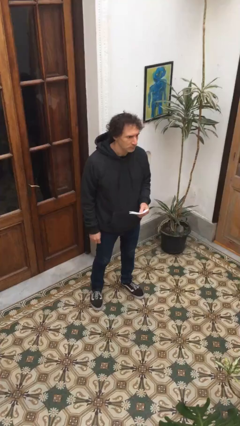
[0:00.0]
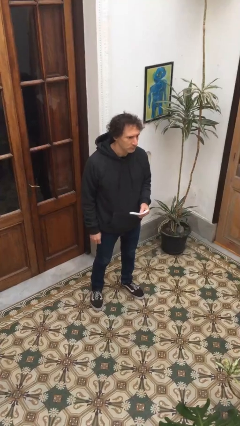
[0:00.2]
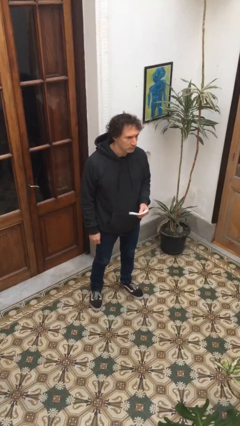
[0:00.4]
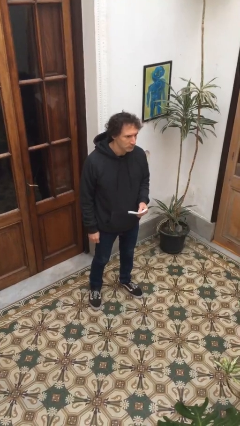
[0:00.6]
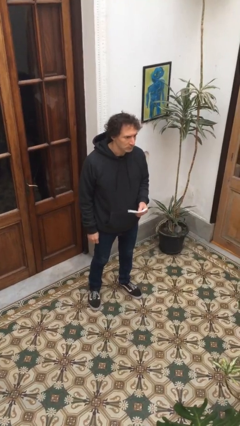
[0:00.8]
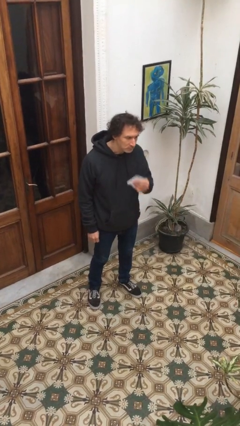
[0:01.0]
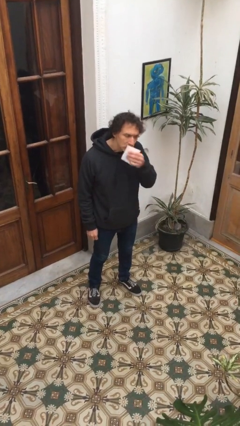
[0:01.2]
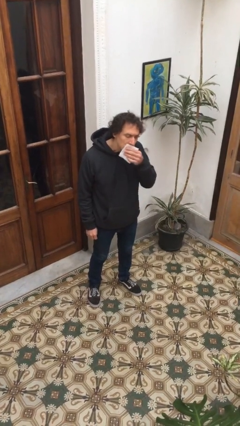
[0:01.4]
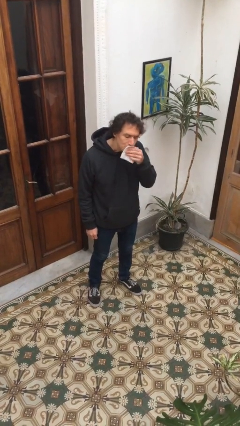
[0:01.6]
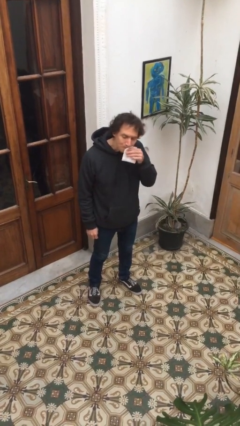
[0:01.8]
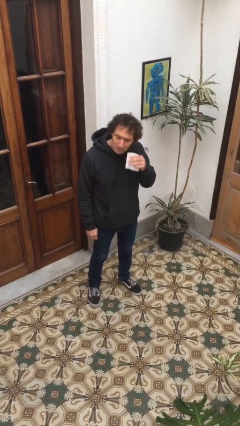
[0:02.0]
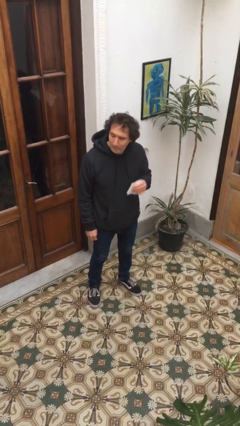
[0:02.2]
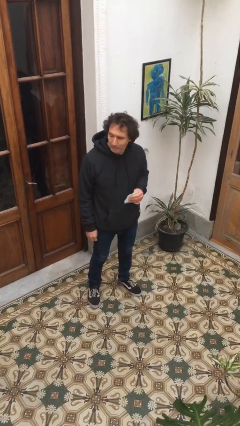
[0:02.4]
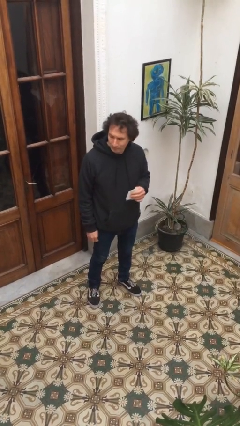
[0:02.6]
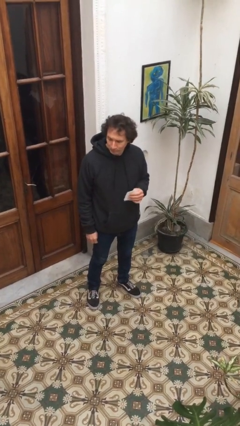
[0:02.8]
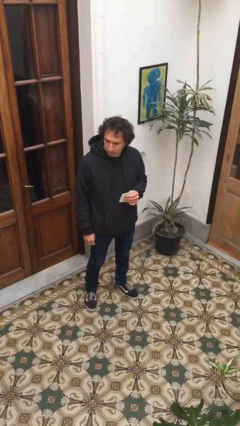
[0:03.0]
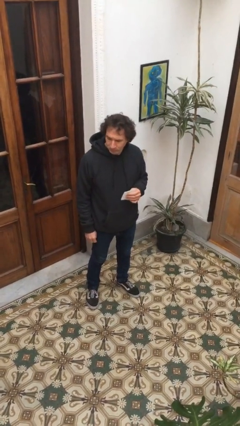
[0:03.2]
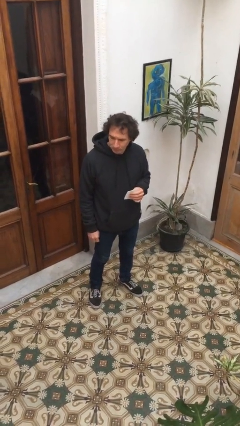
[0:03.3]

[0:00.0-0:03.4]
person wipes mouth with napkin

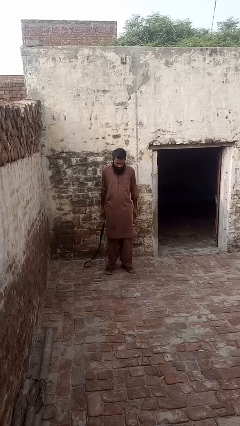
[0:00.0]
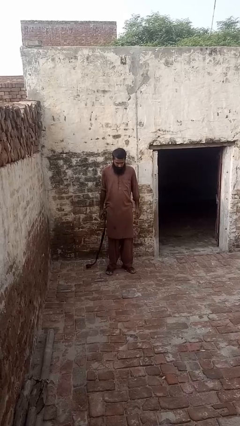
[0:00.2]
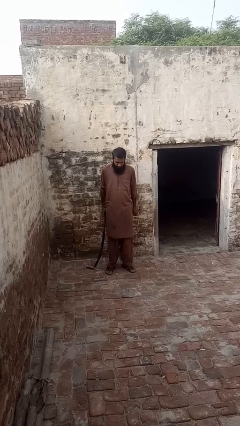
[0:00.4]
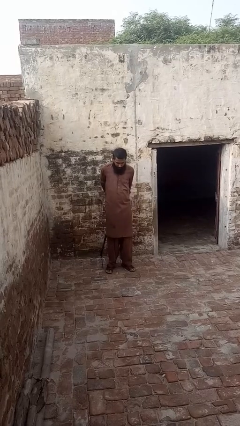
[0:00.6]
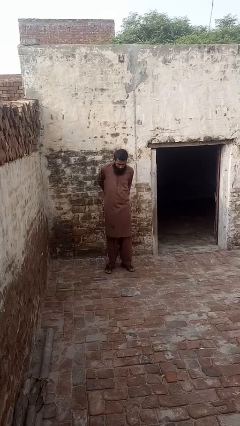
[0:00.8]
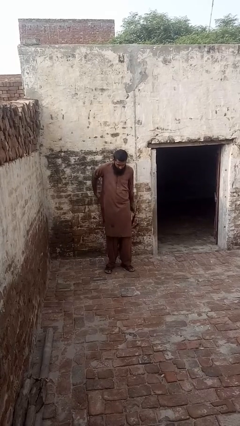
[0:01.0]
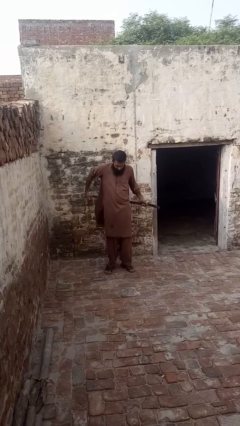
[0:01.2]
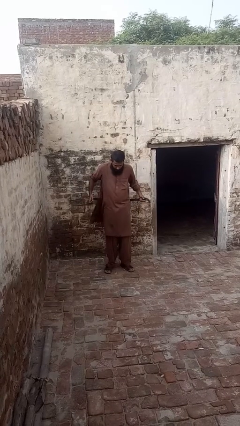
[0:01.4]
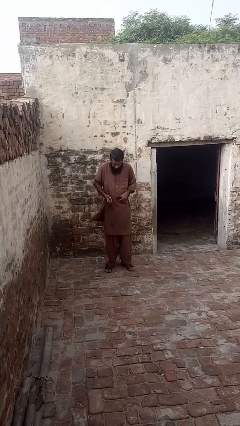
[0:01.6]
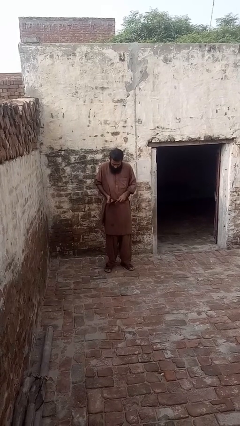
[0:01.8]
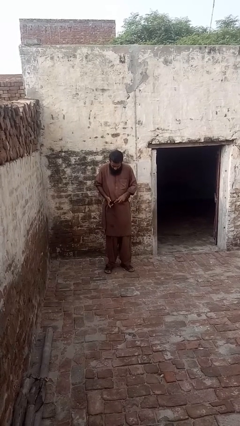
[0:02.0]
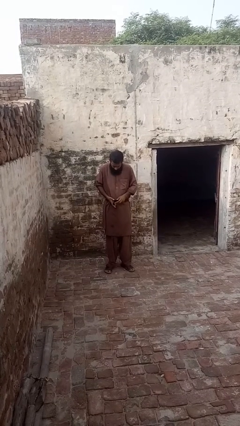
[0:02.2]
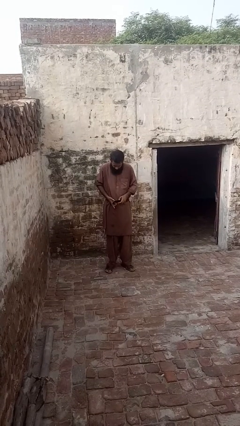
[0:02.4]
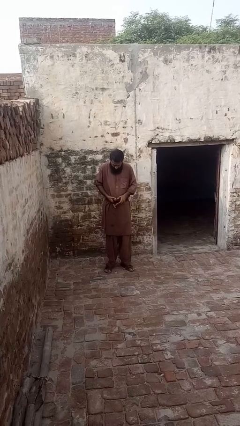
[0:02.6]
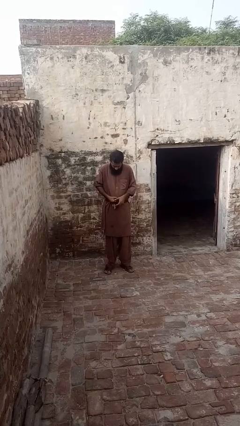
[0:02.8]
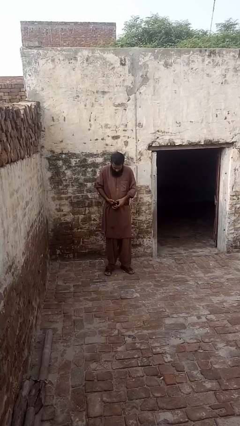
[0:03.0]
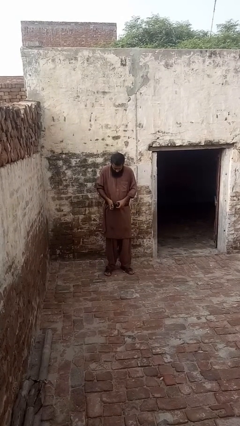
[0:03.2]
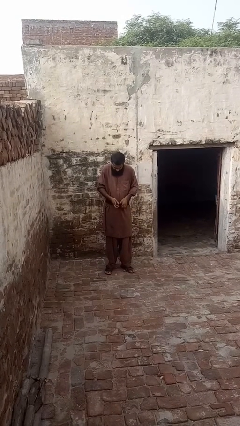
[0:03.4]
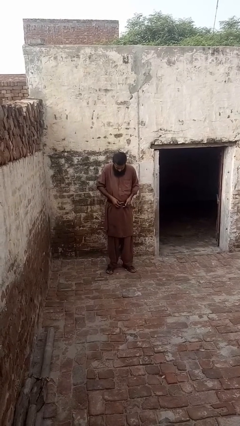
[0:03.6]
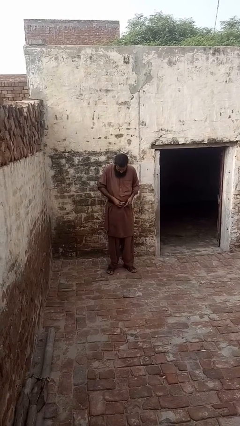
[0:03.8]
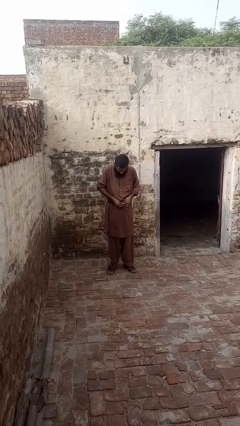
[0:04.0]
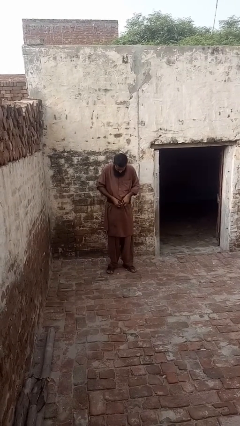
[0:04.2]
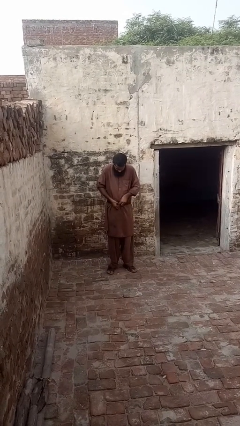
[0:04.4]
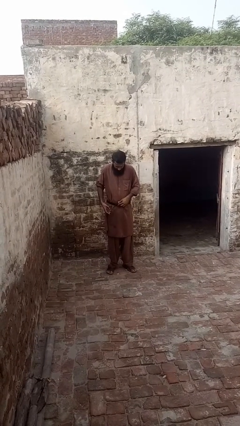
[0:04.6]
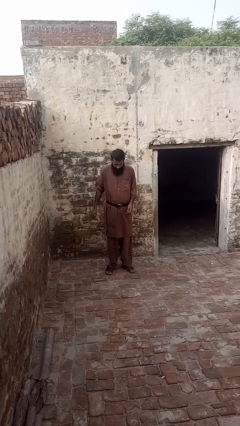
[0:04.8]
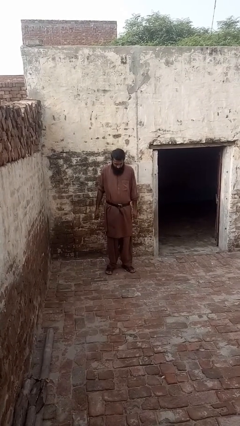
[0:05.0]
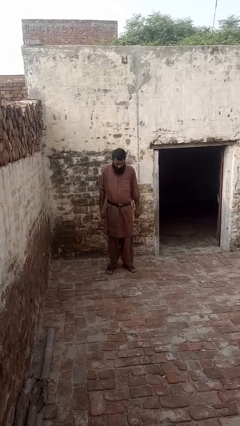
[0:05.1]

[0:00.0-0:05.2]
person puts on belt

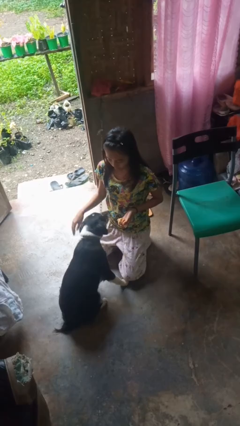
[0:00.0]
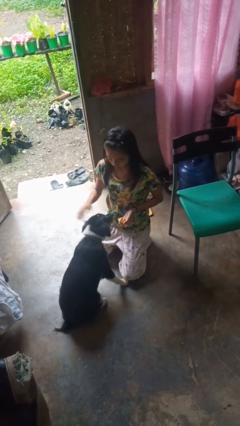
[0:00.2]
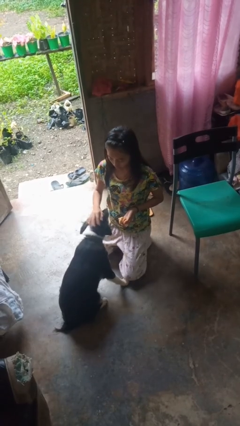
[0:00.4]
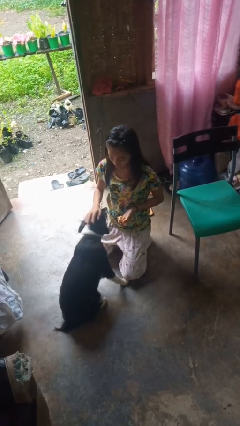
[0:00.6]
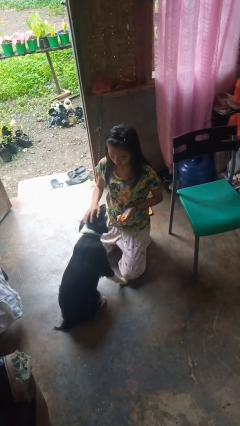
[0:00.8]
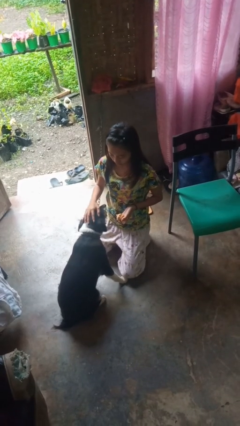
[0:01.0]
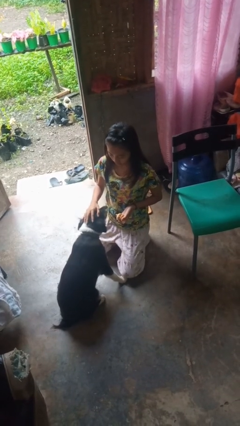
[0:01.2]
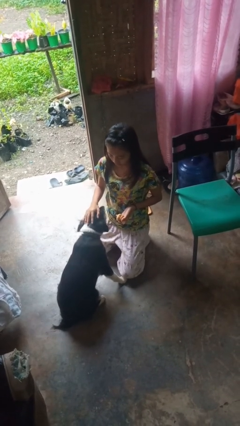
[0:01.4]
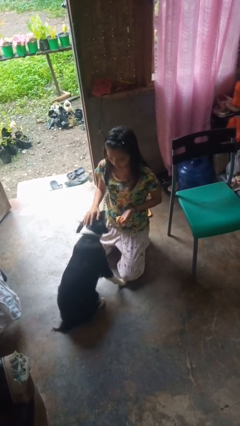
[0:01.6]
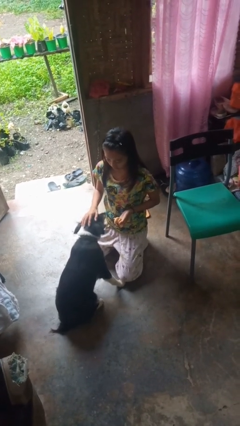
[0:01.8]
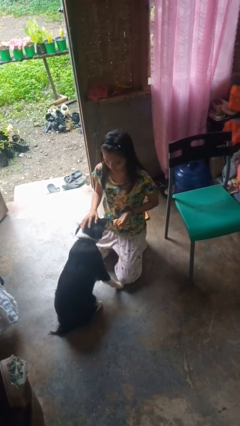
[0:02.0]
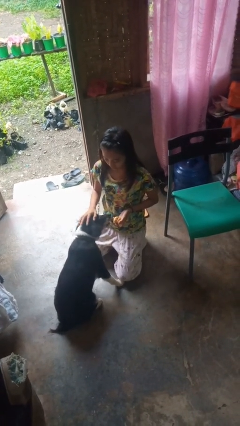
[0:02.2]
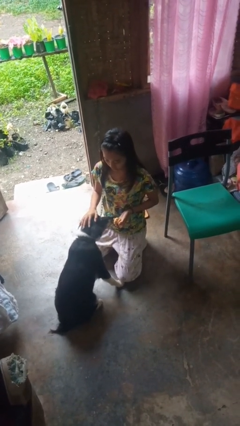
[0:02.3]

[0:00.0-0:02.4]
person pets dog

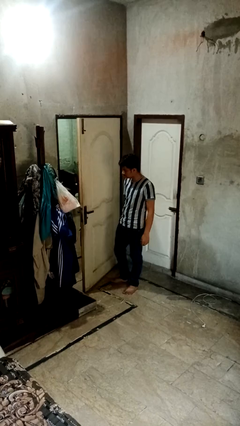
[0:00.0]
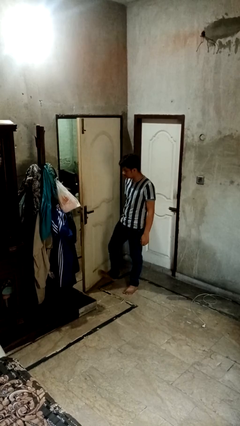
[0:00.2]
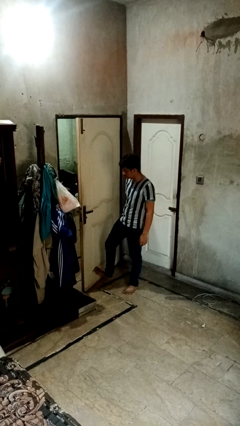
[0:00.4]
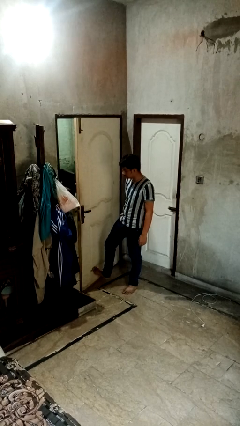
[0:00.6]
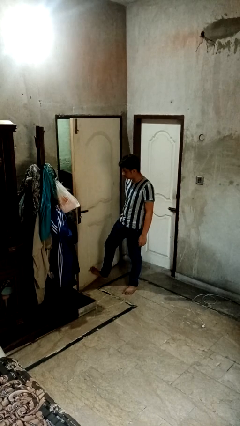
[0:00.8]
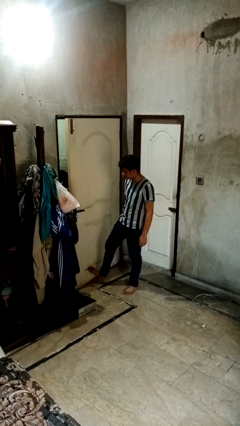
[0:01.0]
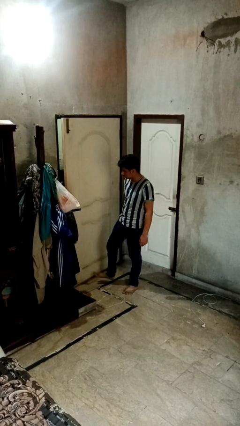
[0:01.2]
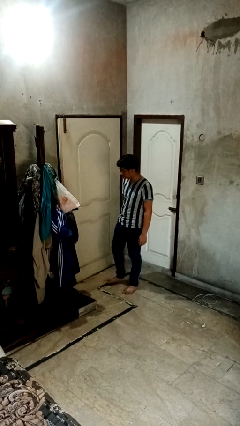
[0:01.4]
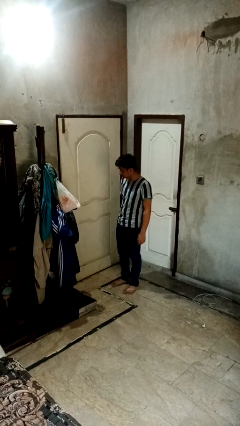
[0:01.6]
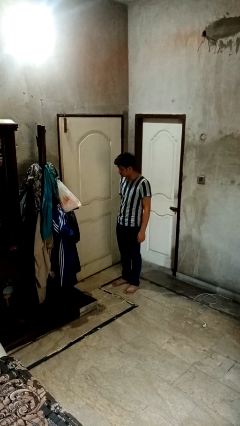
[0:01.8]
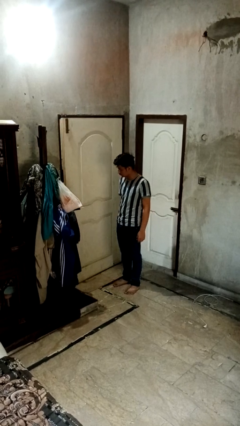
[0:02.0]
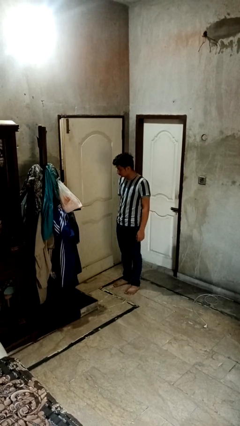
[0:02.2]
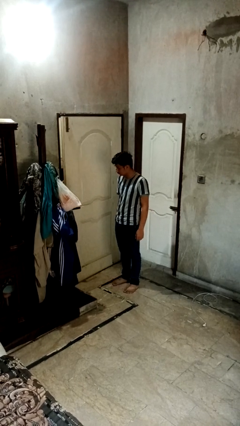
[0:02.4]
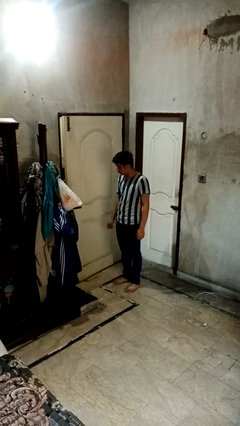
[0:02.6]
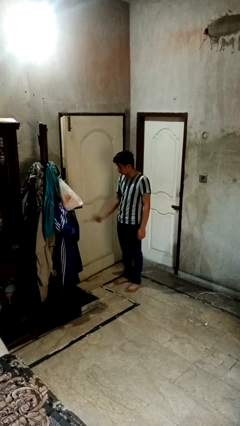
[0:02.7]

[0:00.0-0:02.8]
person closes door with foot

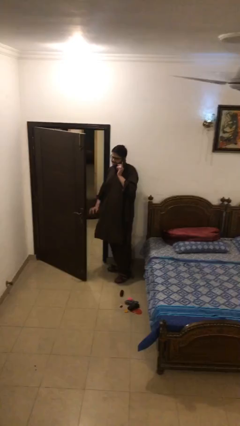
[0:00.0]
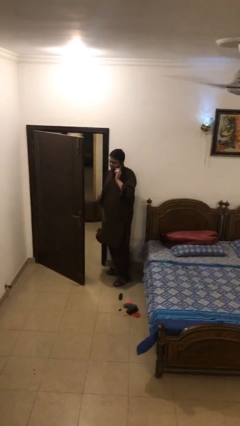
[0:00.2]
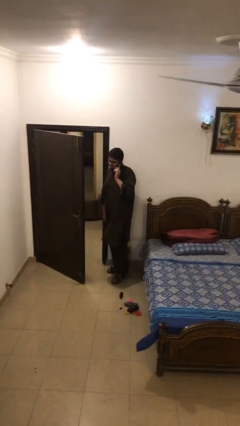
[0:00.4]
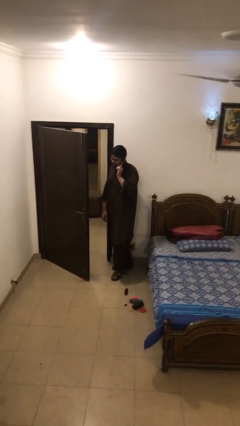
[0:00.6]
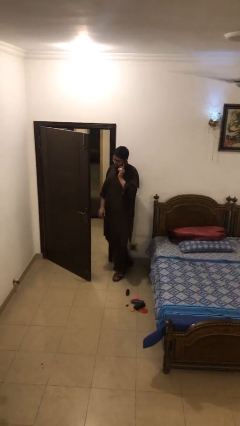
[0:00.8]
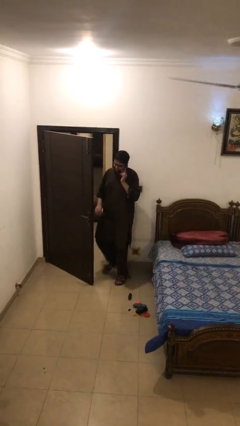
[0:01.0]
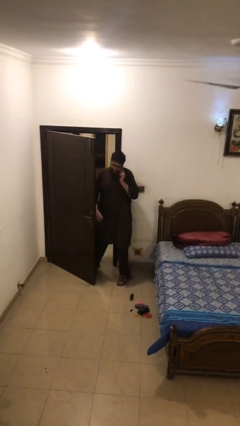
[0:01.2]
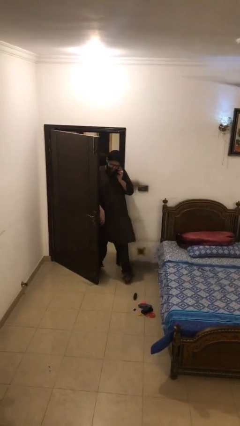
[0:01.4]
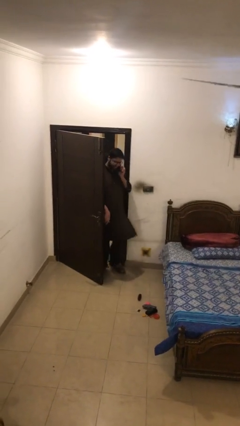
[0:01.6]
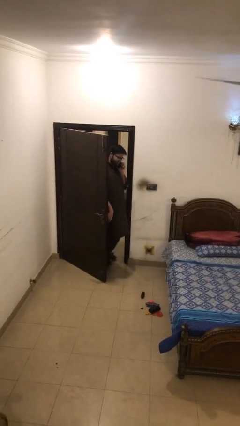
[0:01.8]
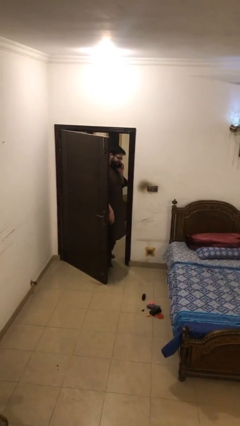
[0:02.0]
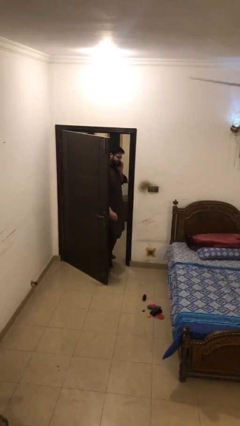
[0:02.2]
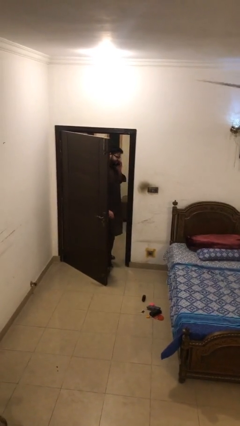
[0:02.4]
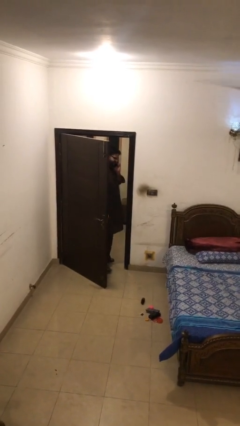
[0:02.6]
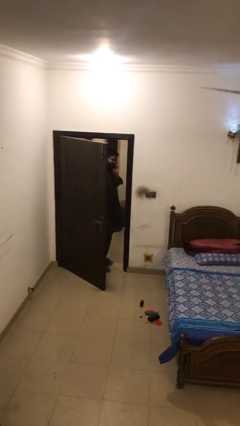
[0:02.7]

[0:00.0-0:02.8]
person exits scene through structure

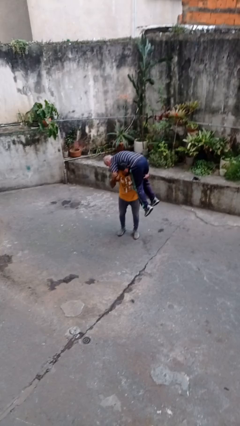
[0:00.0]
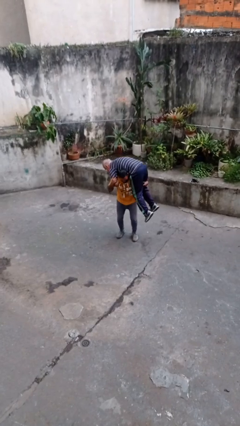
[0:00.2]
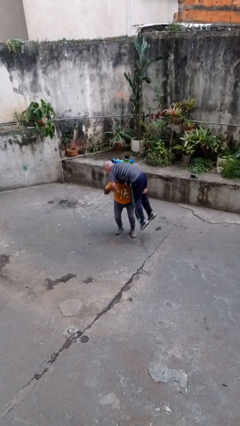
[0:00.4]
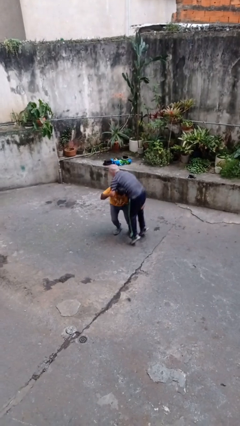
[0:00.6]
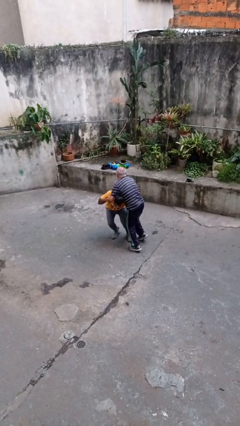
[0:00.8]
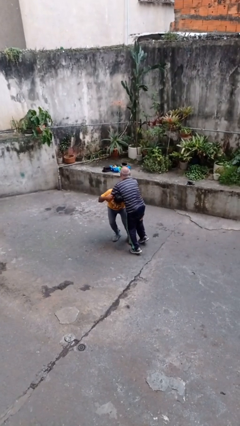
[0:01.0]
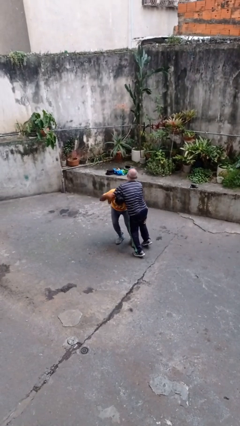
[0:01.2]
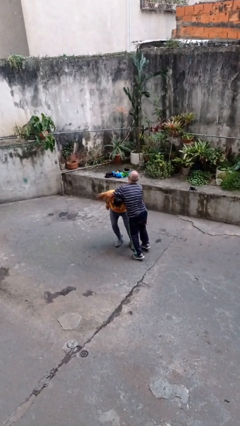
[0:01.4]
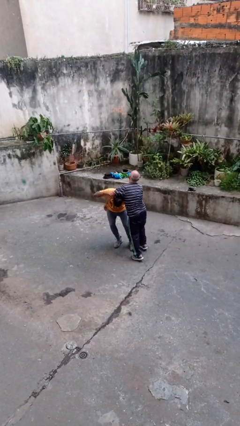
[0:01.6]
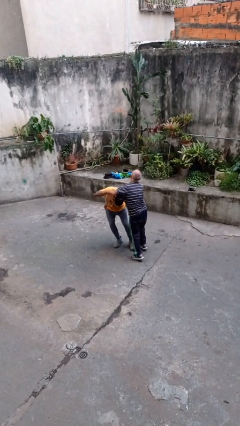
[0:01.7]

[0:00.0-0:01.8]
person puts down person
